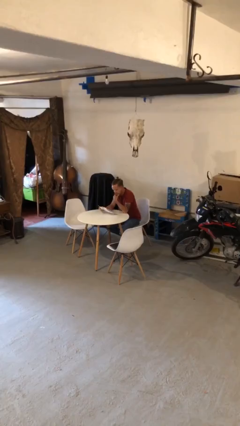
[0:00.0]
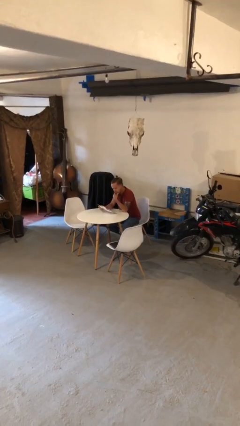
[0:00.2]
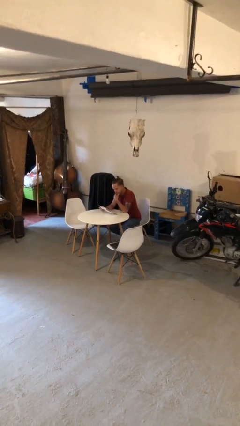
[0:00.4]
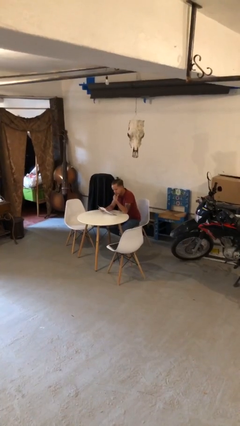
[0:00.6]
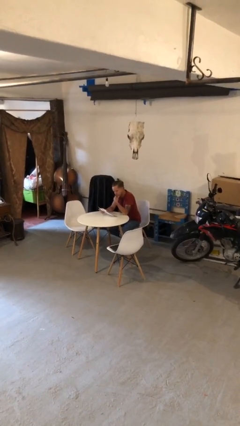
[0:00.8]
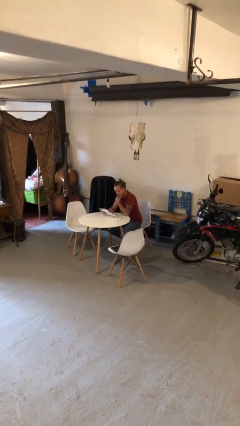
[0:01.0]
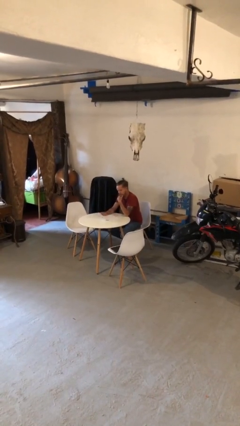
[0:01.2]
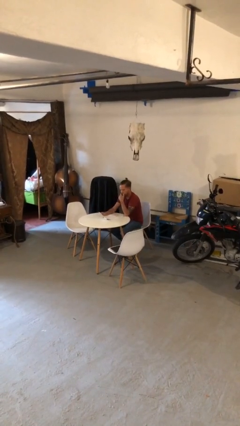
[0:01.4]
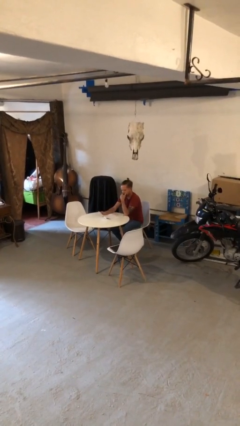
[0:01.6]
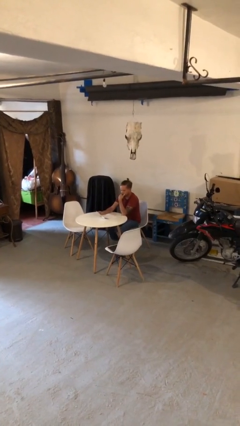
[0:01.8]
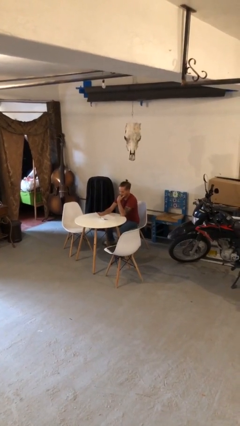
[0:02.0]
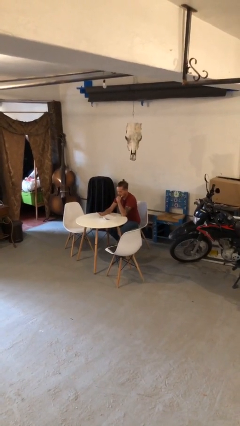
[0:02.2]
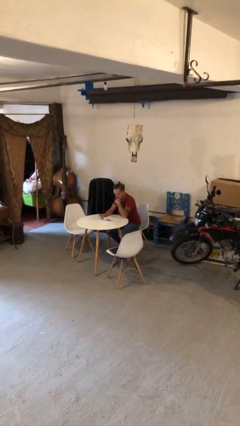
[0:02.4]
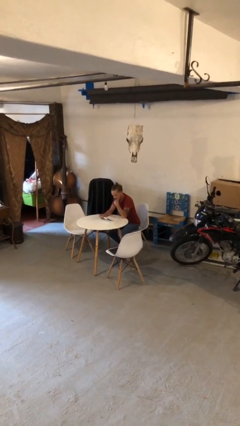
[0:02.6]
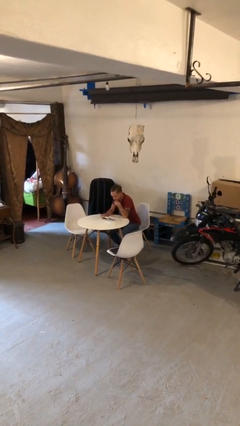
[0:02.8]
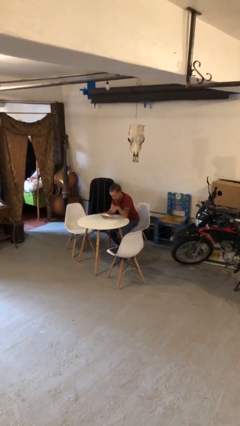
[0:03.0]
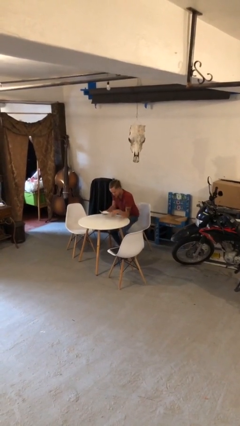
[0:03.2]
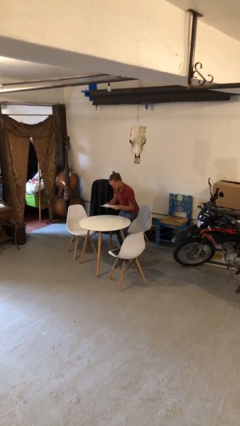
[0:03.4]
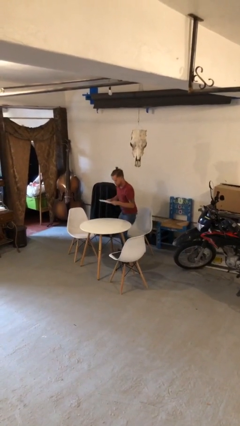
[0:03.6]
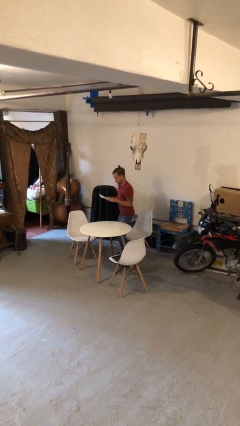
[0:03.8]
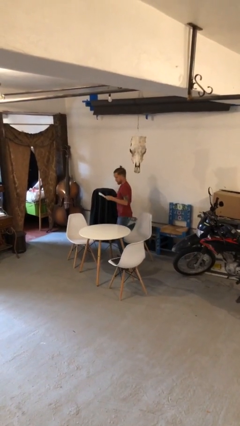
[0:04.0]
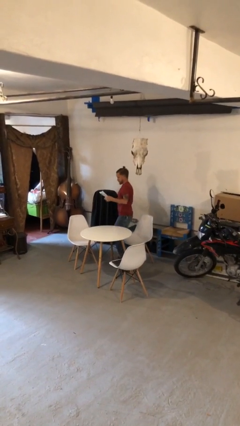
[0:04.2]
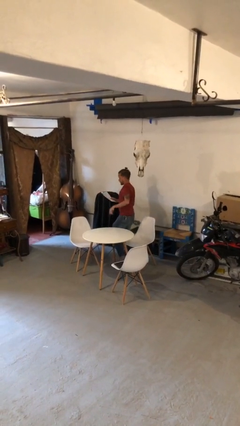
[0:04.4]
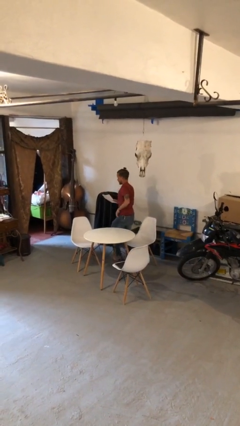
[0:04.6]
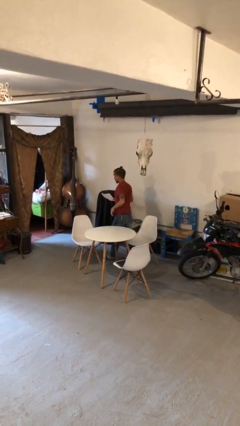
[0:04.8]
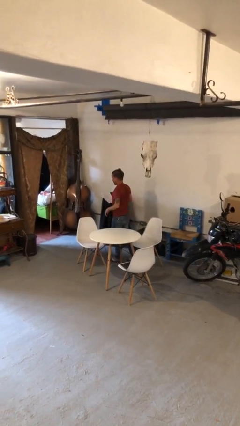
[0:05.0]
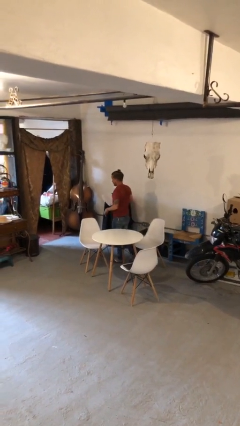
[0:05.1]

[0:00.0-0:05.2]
person stands up

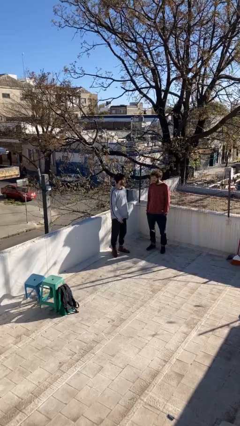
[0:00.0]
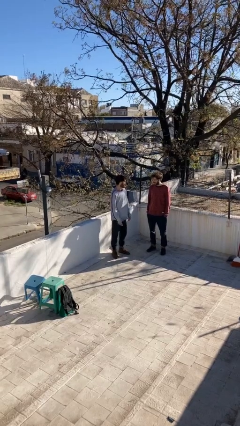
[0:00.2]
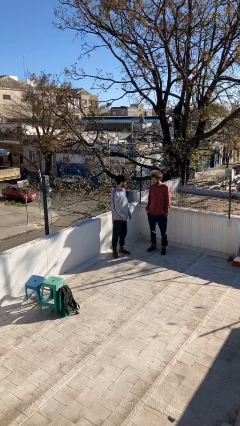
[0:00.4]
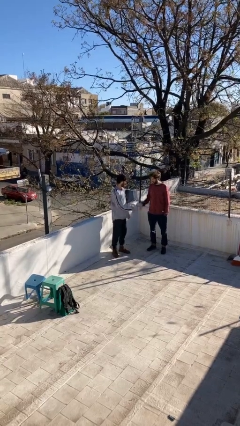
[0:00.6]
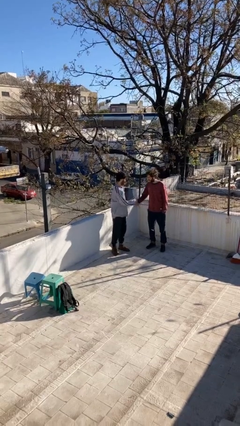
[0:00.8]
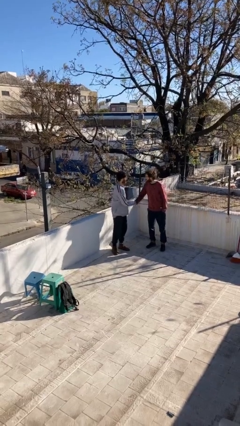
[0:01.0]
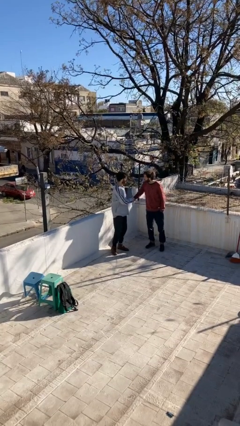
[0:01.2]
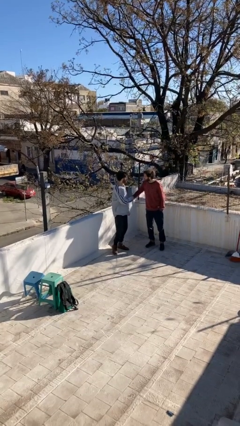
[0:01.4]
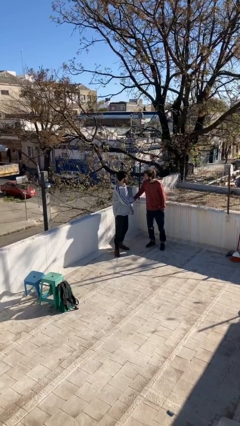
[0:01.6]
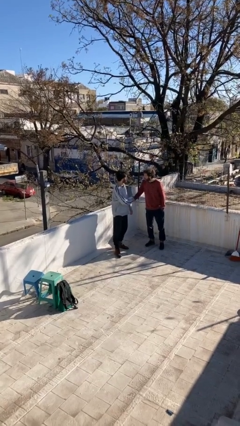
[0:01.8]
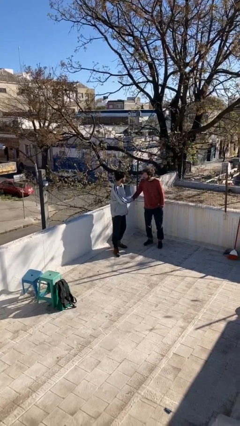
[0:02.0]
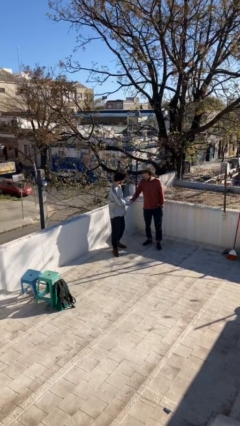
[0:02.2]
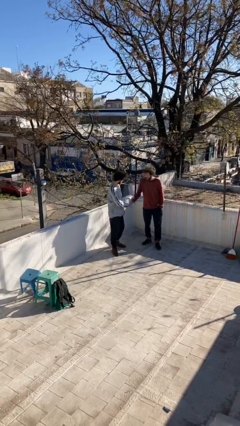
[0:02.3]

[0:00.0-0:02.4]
person shakes hand

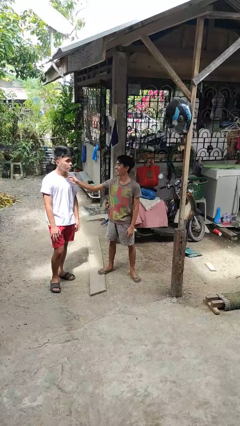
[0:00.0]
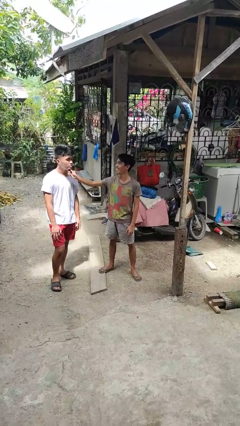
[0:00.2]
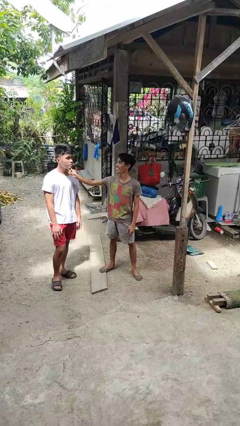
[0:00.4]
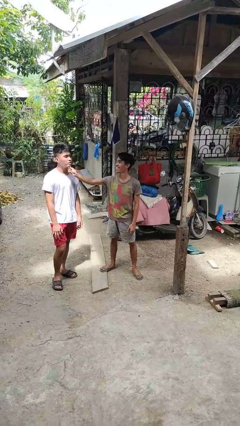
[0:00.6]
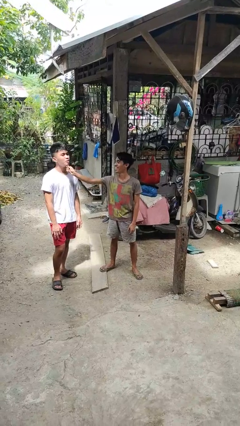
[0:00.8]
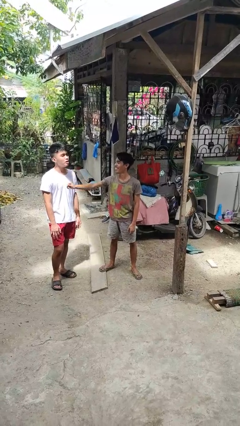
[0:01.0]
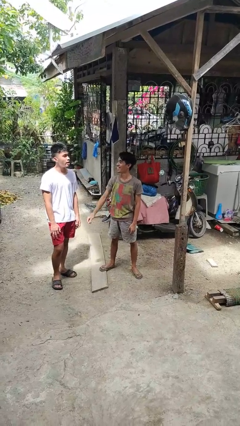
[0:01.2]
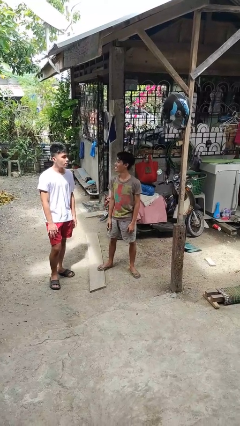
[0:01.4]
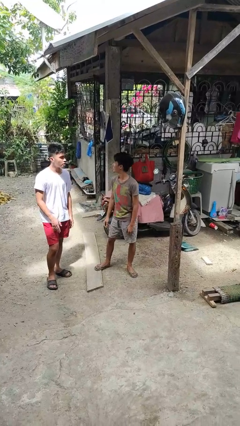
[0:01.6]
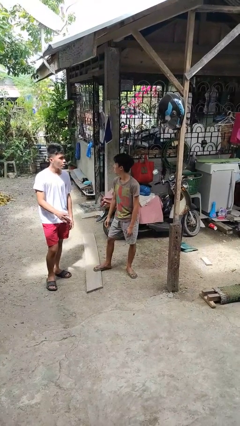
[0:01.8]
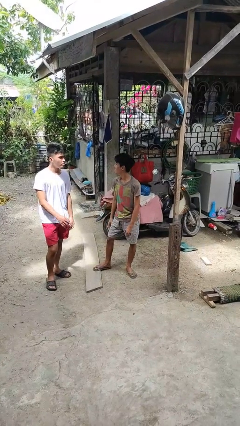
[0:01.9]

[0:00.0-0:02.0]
person touches face of person

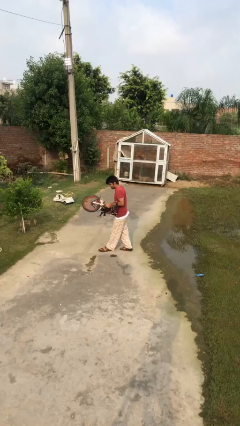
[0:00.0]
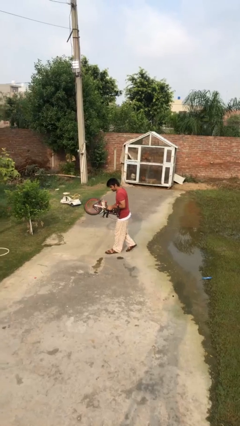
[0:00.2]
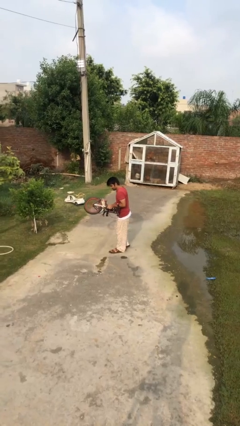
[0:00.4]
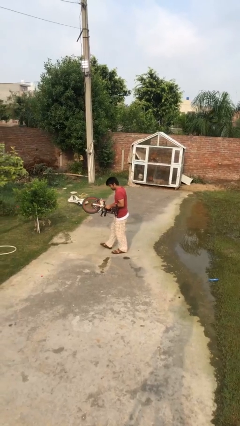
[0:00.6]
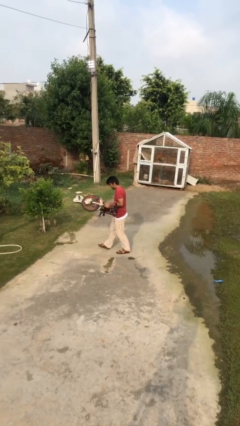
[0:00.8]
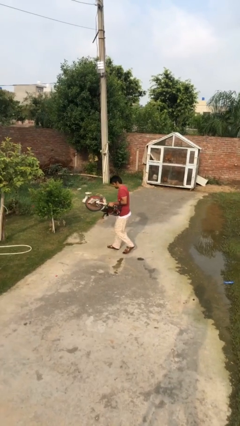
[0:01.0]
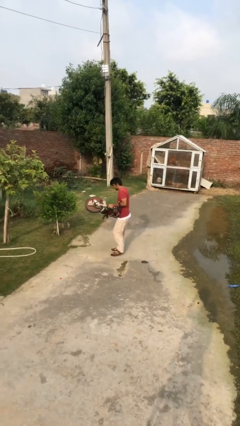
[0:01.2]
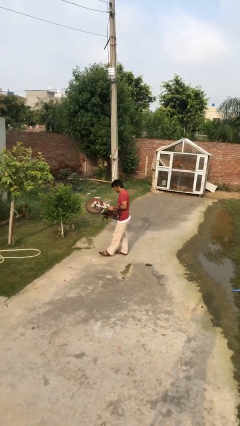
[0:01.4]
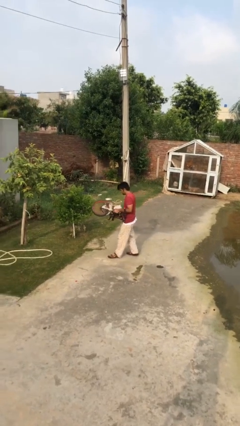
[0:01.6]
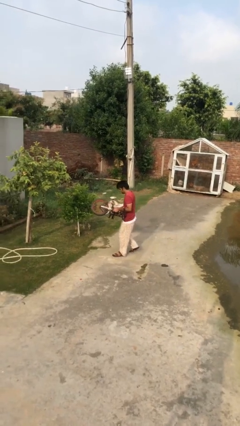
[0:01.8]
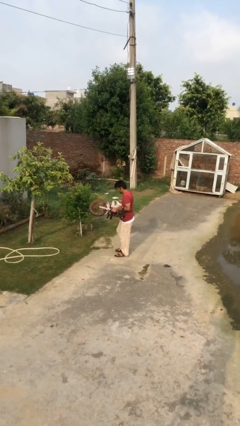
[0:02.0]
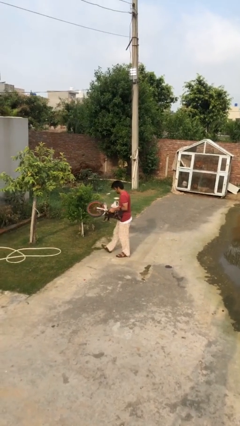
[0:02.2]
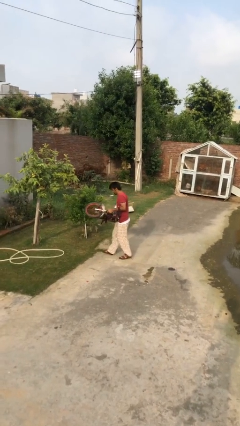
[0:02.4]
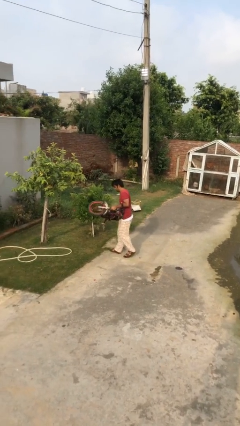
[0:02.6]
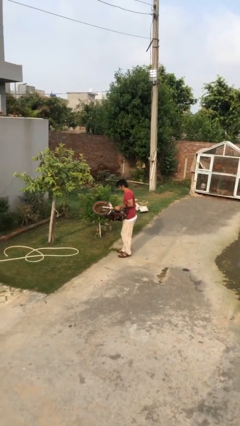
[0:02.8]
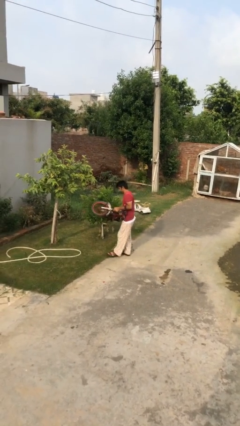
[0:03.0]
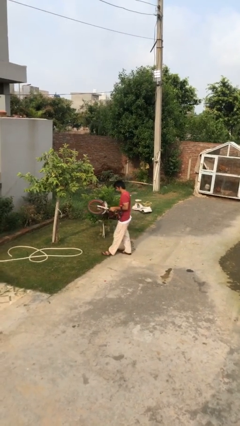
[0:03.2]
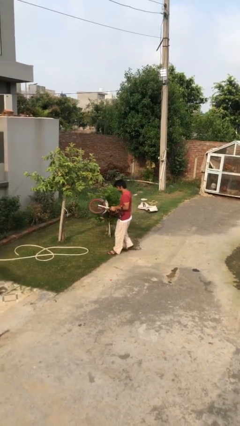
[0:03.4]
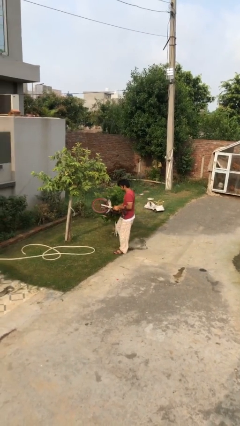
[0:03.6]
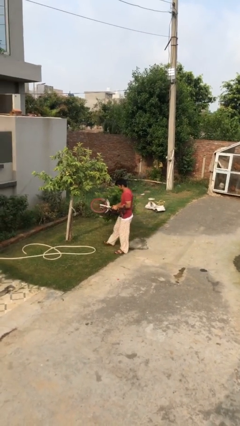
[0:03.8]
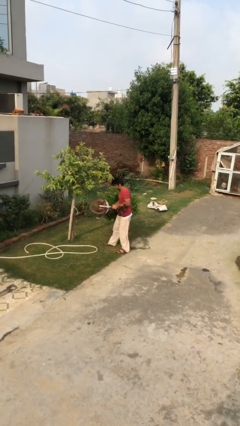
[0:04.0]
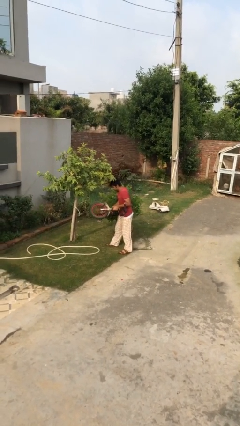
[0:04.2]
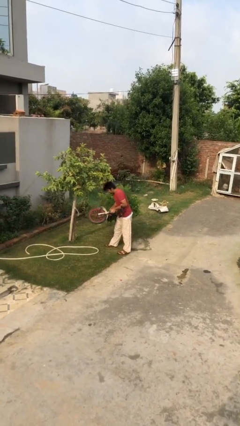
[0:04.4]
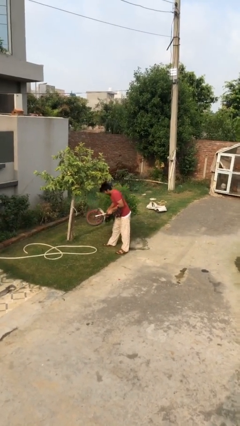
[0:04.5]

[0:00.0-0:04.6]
person carries heavy object

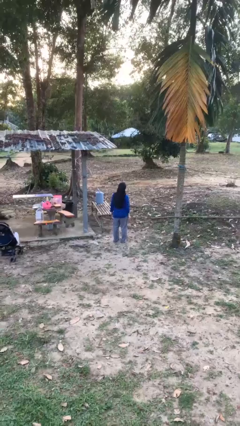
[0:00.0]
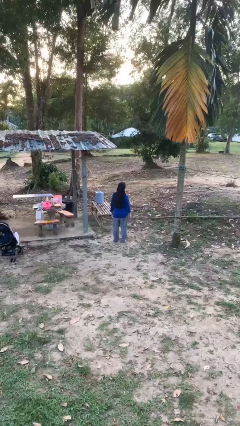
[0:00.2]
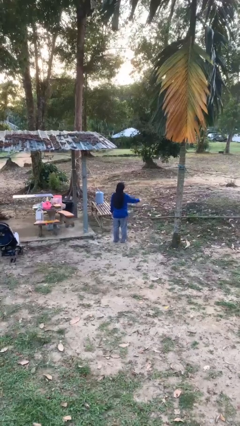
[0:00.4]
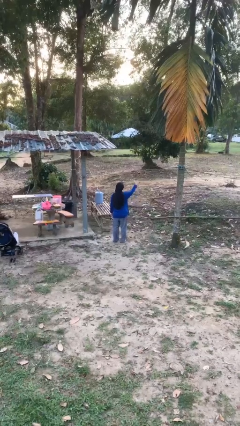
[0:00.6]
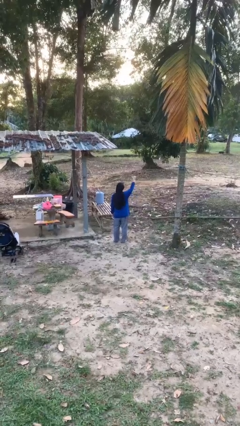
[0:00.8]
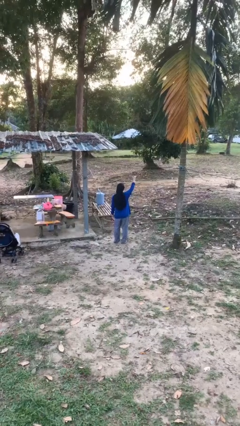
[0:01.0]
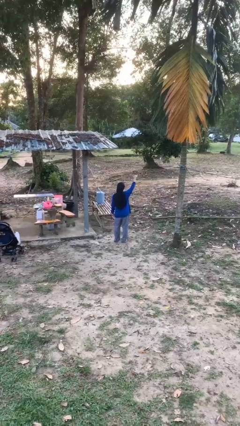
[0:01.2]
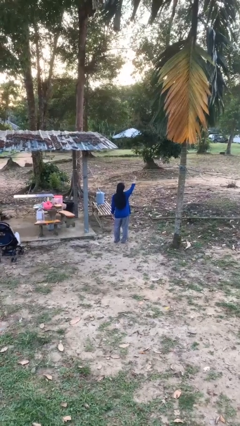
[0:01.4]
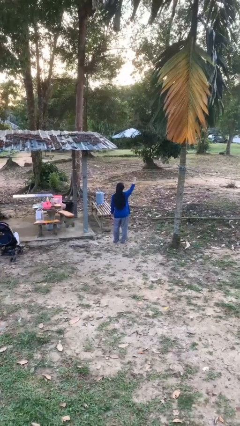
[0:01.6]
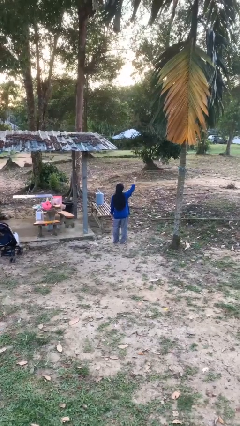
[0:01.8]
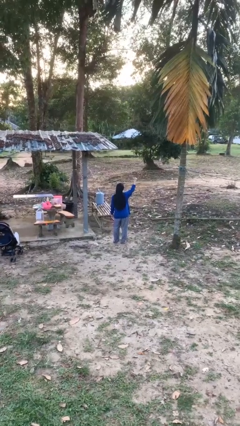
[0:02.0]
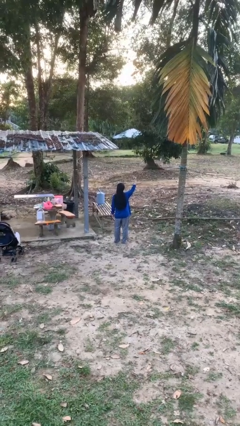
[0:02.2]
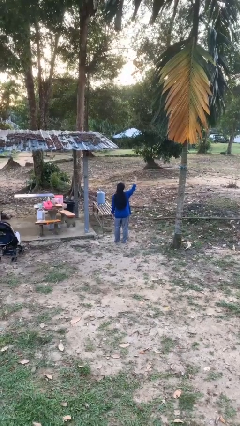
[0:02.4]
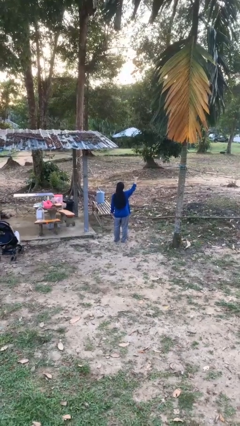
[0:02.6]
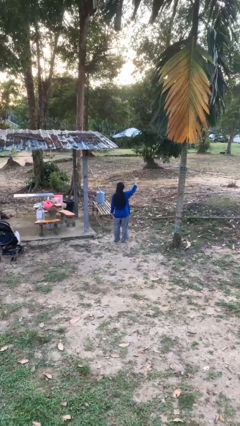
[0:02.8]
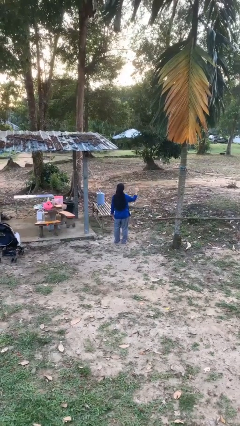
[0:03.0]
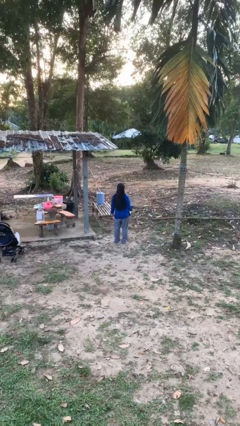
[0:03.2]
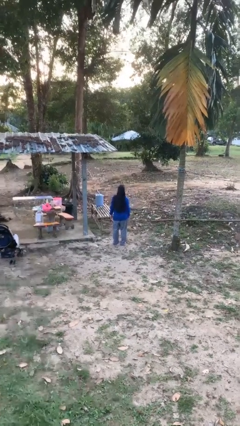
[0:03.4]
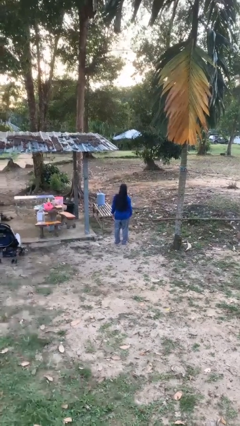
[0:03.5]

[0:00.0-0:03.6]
person gestures hang loose
